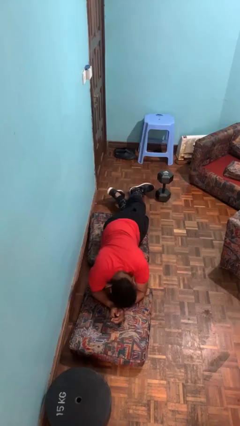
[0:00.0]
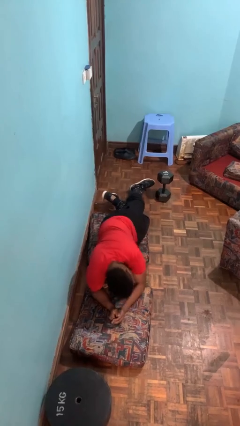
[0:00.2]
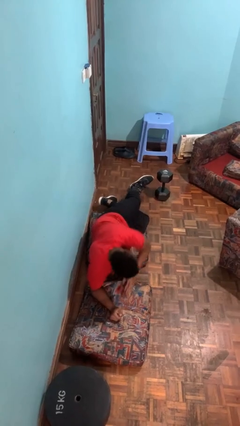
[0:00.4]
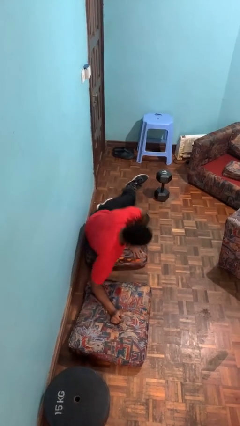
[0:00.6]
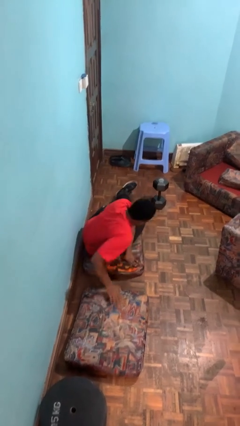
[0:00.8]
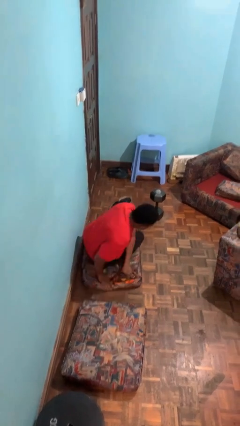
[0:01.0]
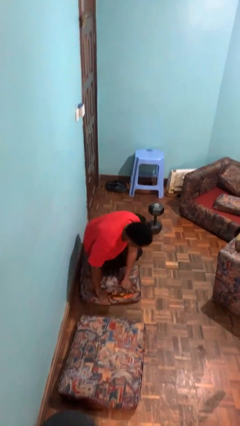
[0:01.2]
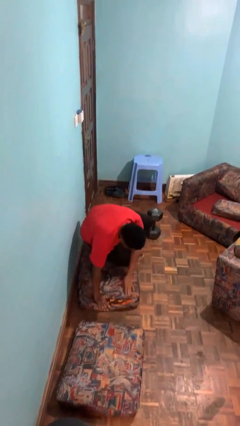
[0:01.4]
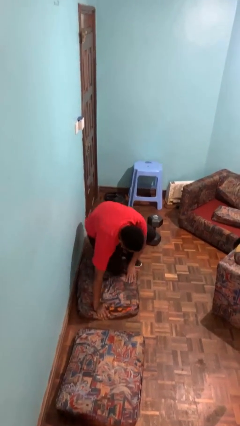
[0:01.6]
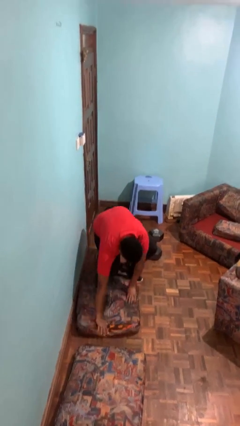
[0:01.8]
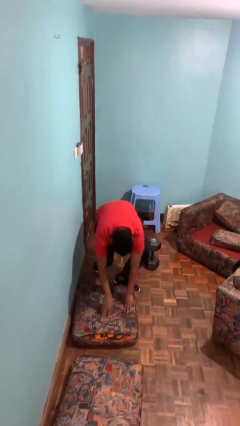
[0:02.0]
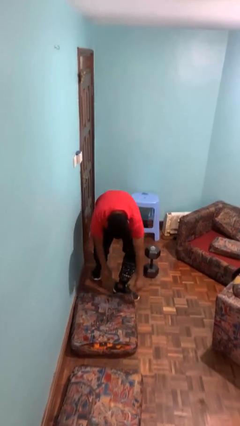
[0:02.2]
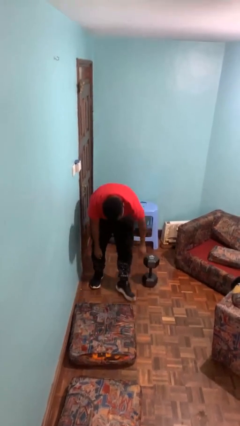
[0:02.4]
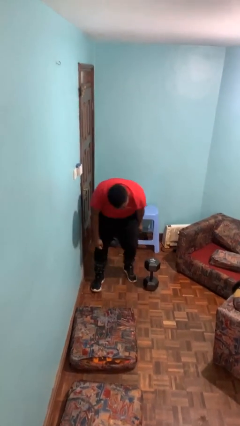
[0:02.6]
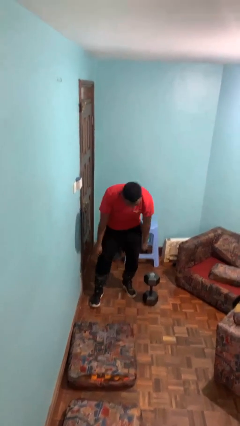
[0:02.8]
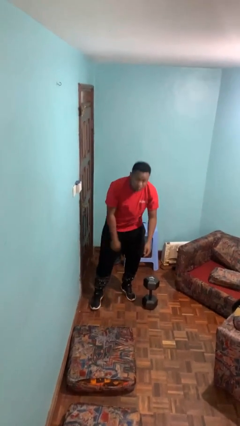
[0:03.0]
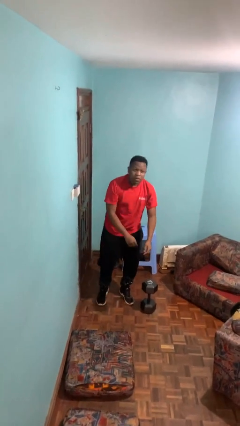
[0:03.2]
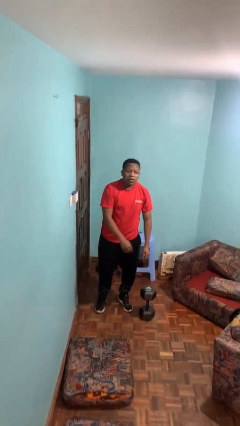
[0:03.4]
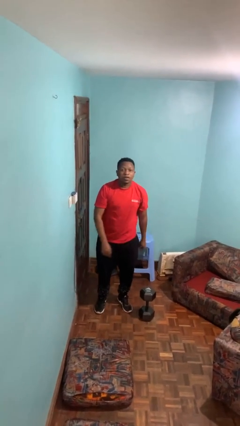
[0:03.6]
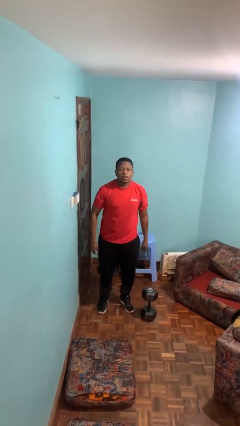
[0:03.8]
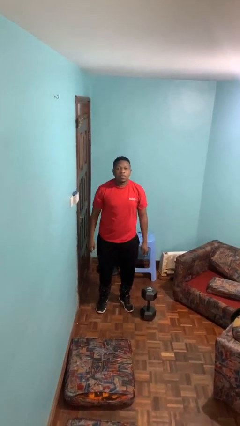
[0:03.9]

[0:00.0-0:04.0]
person stands up from floor

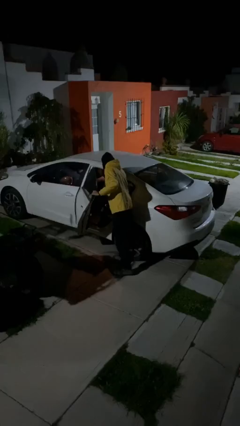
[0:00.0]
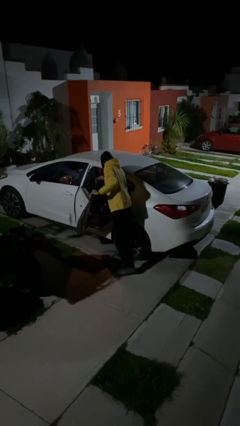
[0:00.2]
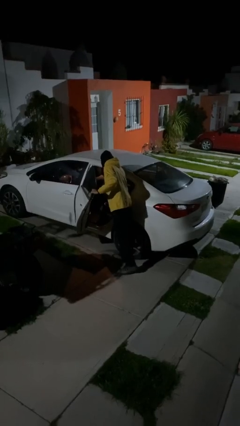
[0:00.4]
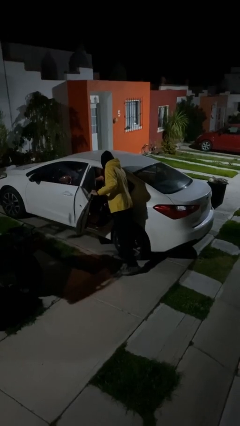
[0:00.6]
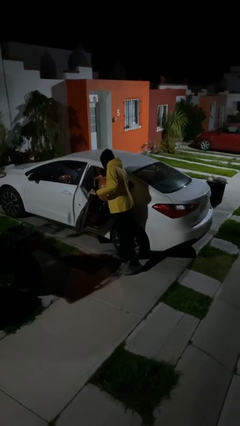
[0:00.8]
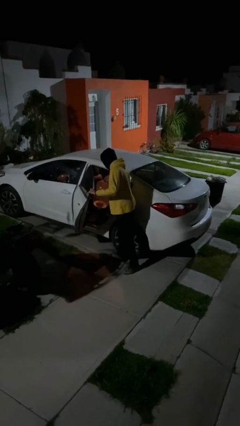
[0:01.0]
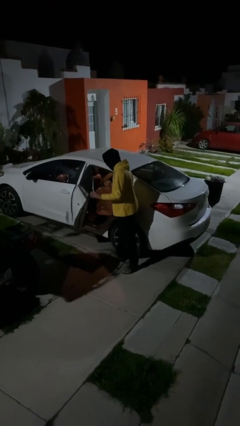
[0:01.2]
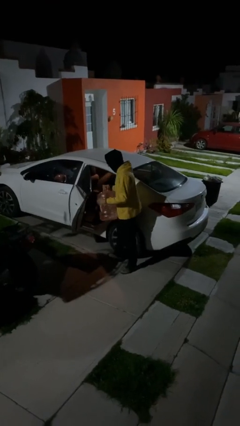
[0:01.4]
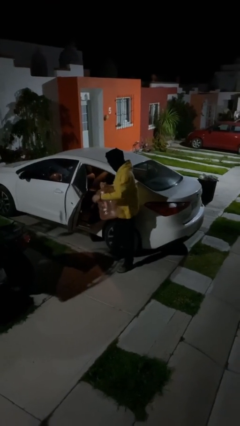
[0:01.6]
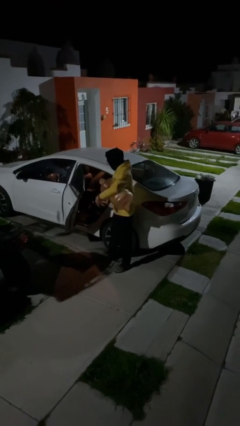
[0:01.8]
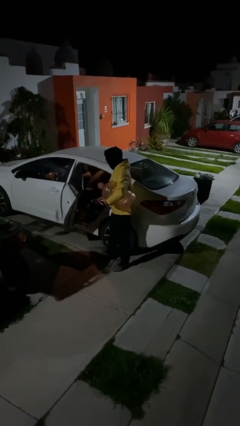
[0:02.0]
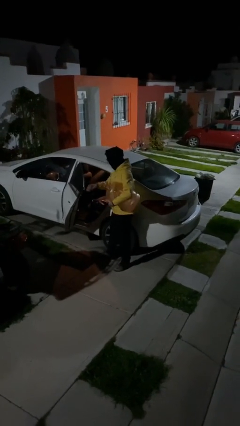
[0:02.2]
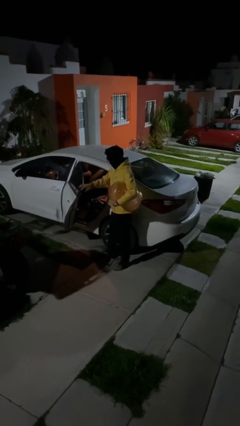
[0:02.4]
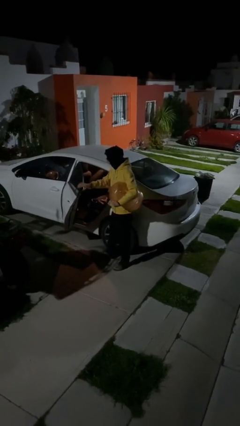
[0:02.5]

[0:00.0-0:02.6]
person unloads car

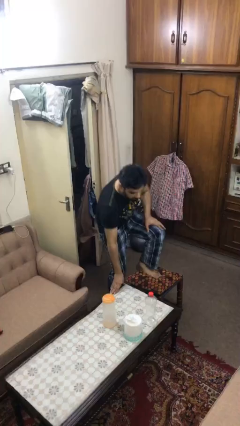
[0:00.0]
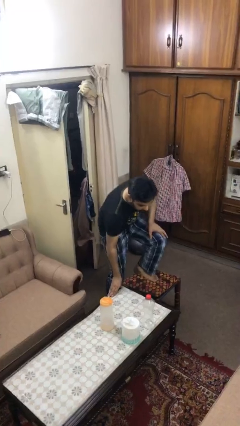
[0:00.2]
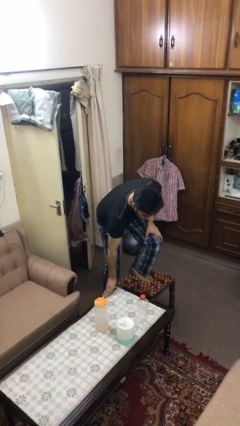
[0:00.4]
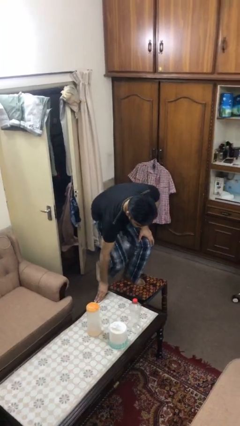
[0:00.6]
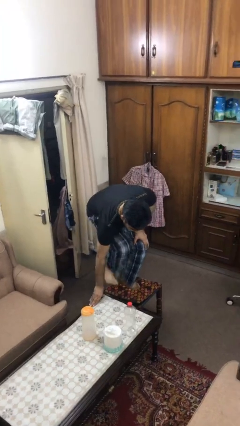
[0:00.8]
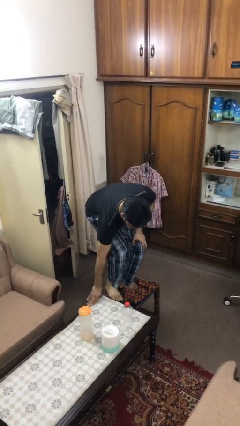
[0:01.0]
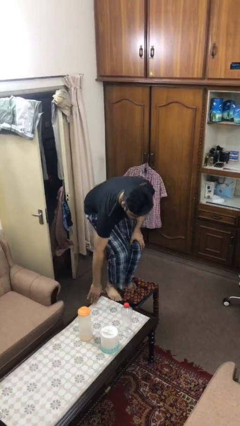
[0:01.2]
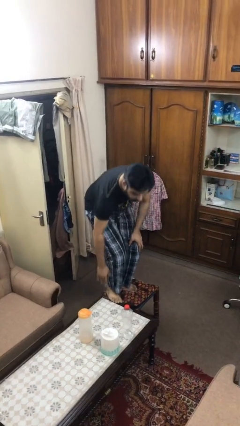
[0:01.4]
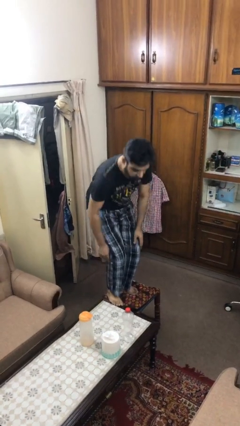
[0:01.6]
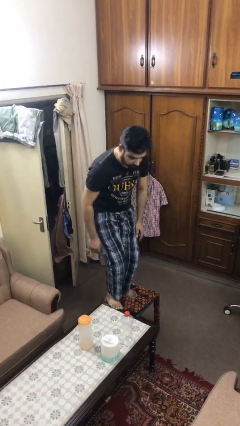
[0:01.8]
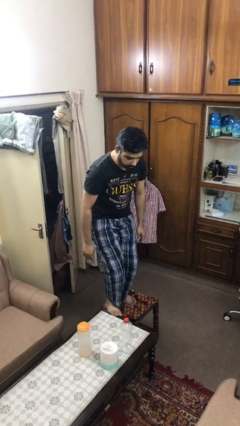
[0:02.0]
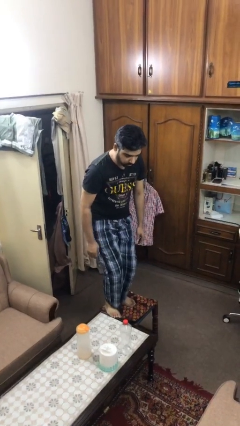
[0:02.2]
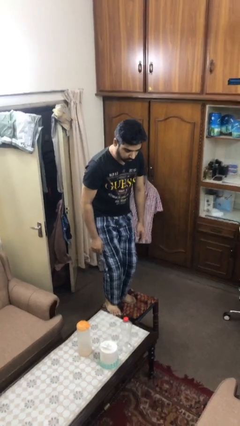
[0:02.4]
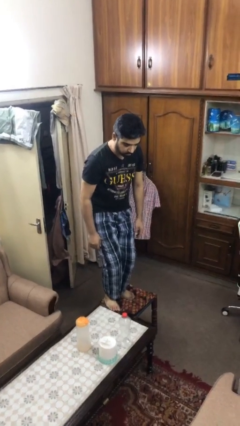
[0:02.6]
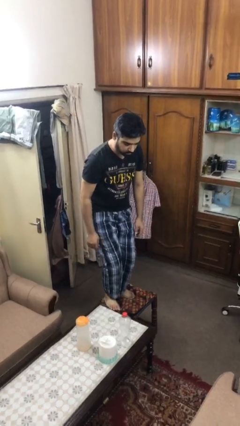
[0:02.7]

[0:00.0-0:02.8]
person climbs on table

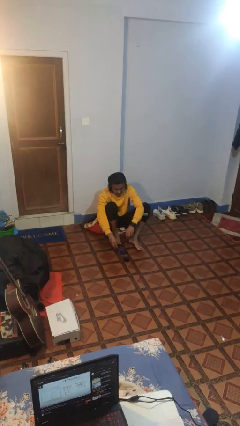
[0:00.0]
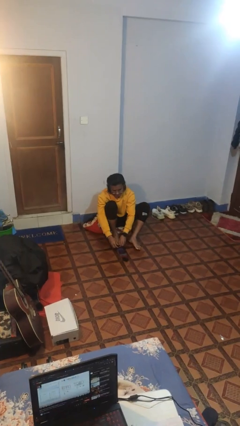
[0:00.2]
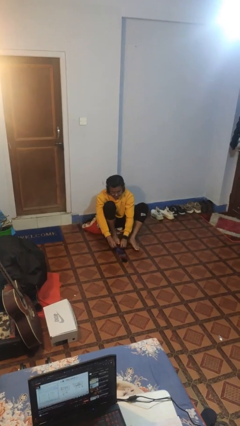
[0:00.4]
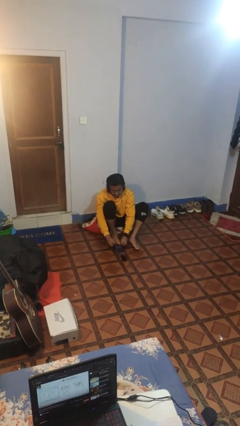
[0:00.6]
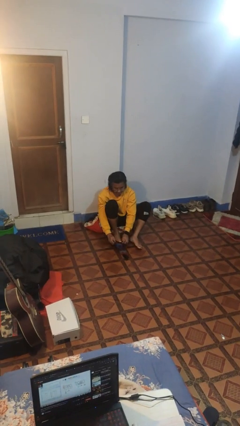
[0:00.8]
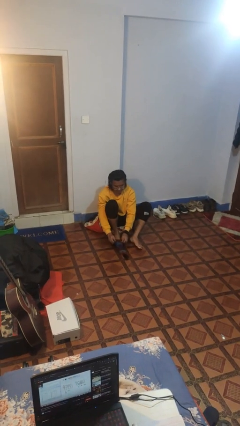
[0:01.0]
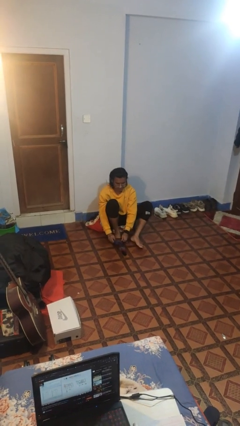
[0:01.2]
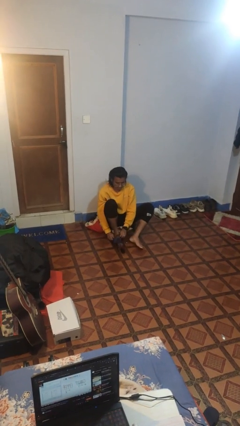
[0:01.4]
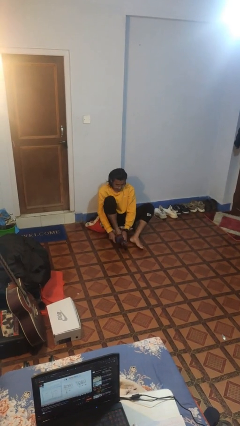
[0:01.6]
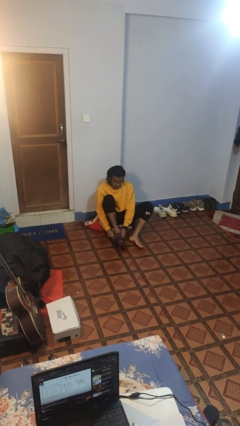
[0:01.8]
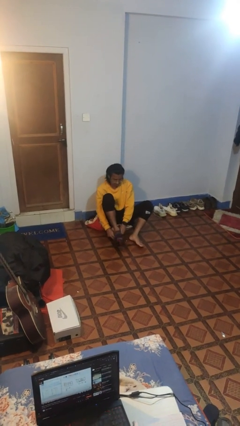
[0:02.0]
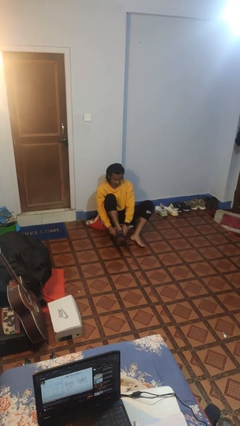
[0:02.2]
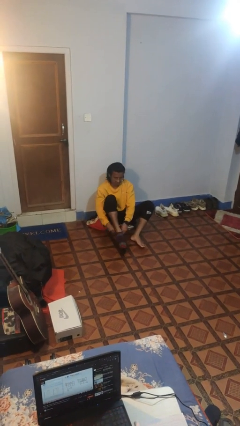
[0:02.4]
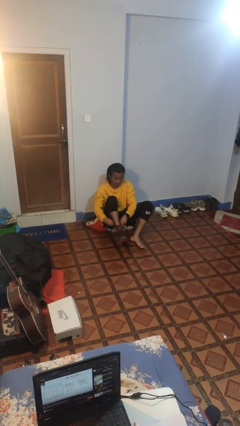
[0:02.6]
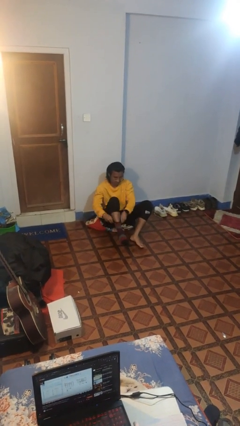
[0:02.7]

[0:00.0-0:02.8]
person puts on socks

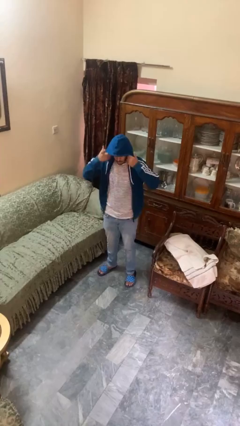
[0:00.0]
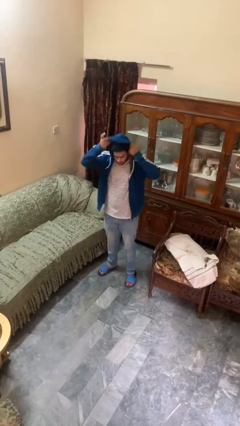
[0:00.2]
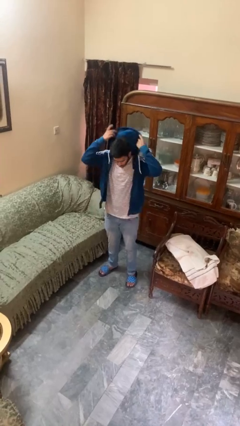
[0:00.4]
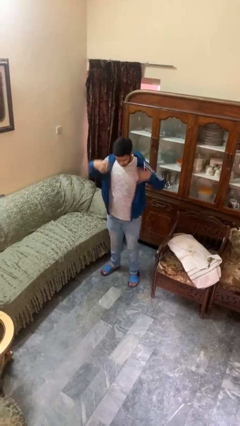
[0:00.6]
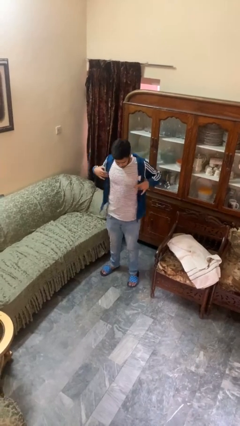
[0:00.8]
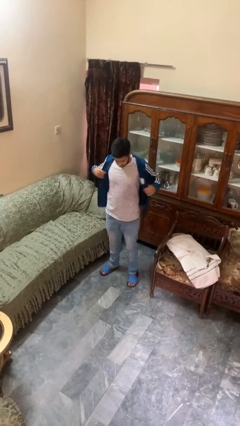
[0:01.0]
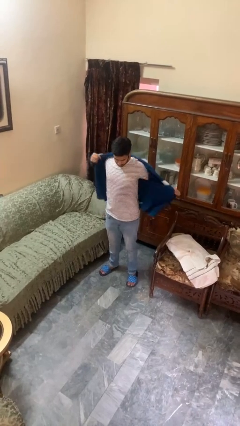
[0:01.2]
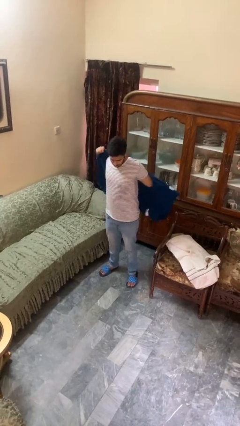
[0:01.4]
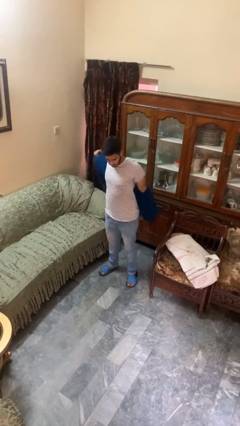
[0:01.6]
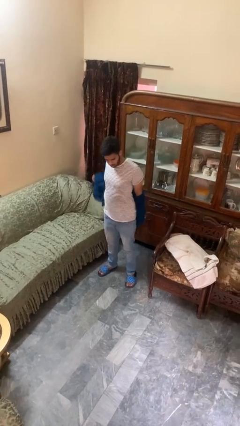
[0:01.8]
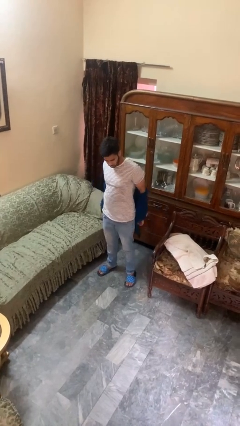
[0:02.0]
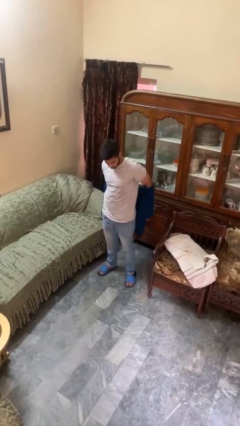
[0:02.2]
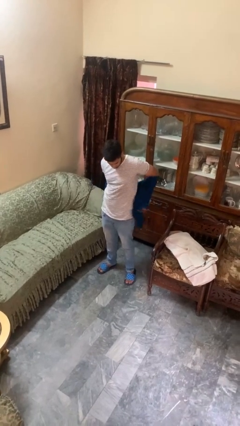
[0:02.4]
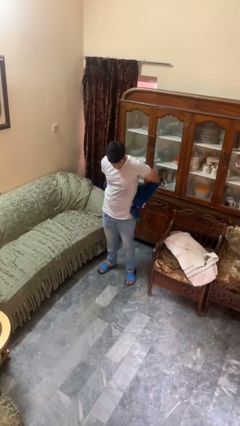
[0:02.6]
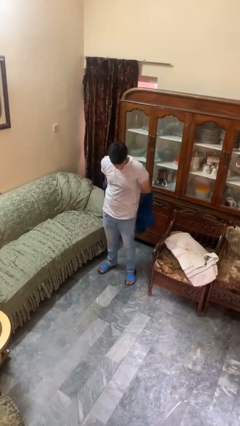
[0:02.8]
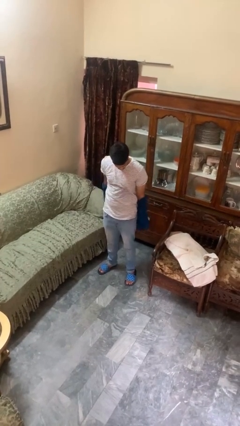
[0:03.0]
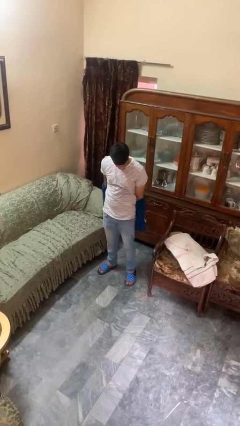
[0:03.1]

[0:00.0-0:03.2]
person takes off hoodie

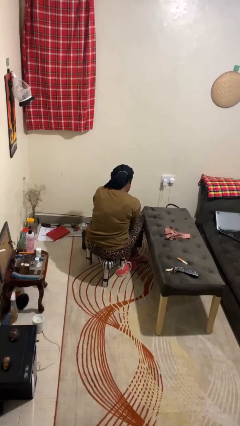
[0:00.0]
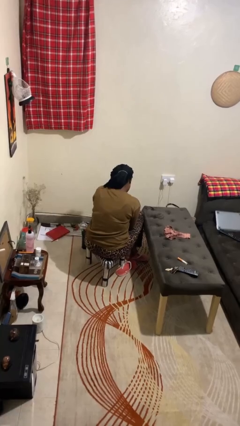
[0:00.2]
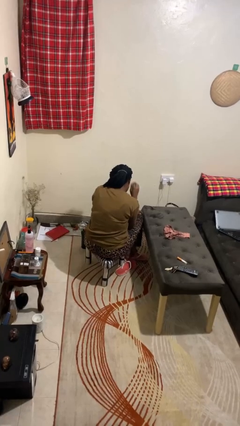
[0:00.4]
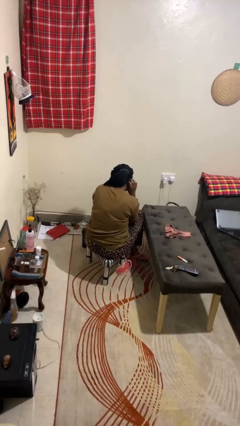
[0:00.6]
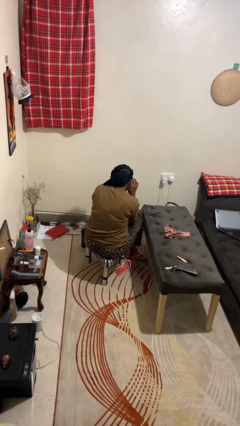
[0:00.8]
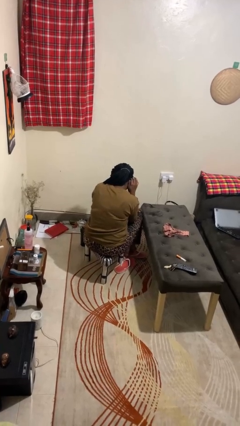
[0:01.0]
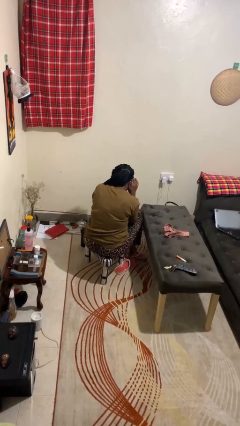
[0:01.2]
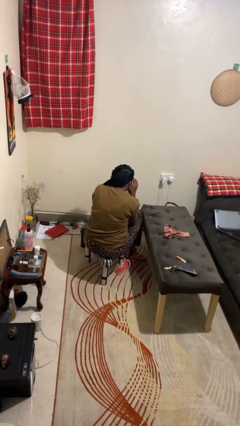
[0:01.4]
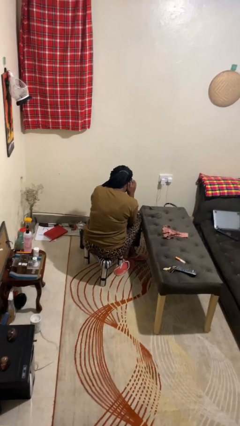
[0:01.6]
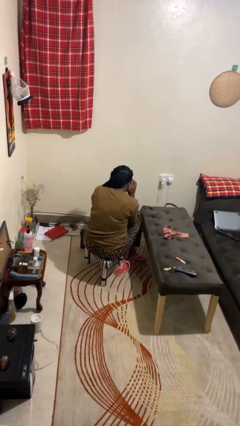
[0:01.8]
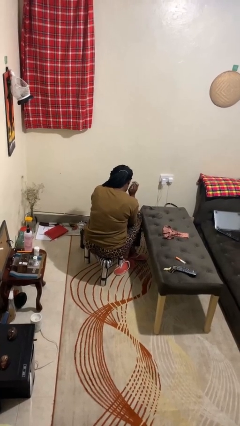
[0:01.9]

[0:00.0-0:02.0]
person gestures listen closely
